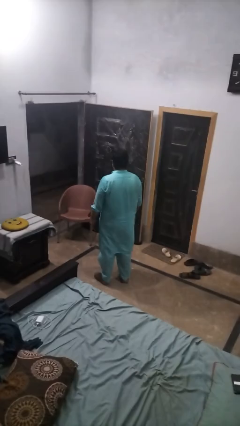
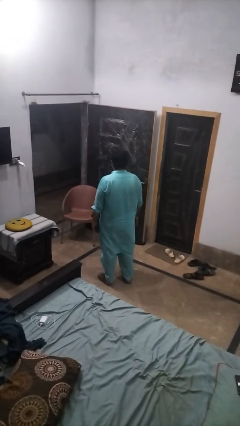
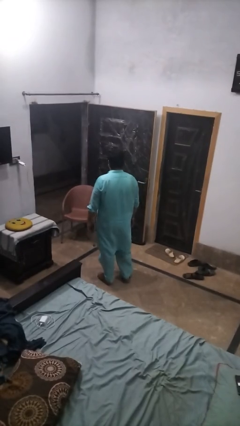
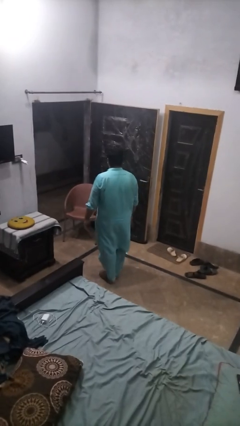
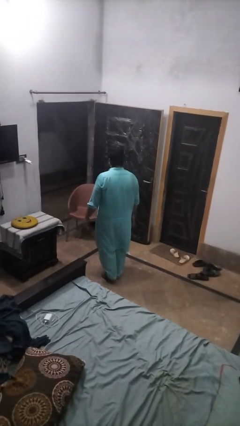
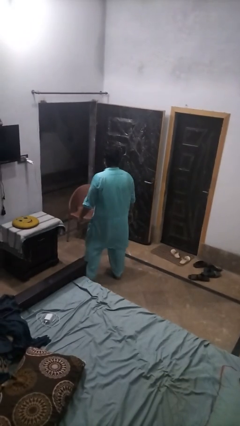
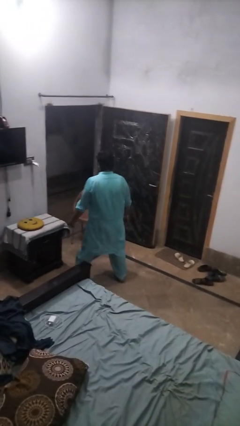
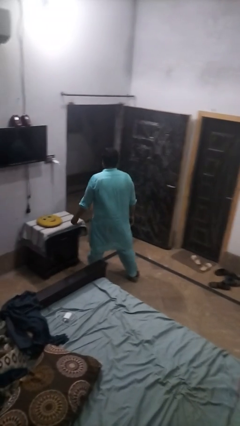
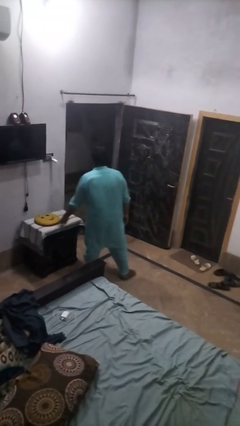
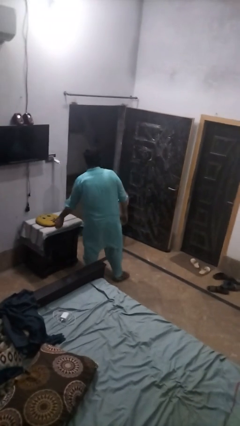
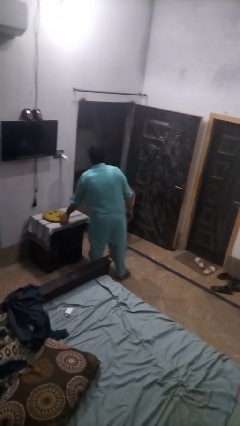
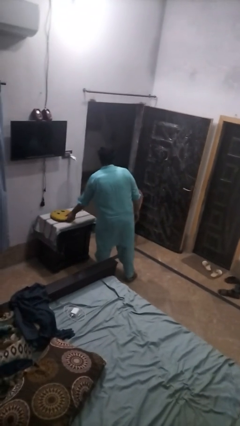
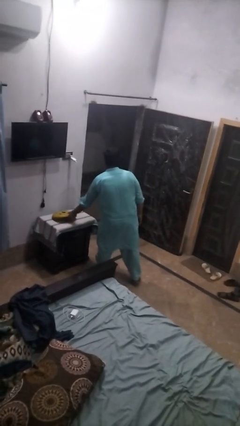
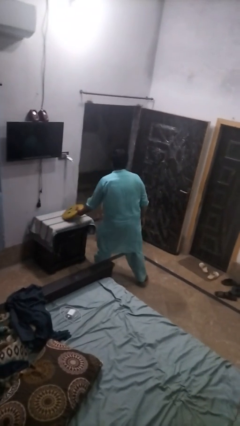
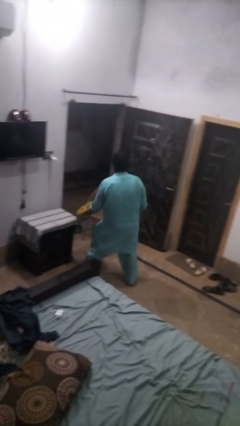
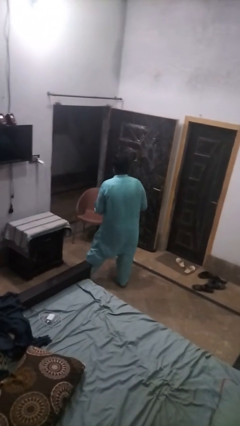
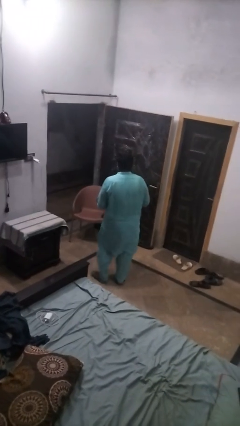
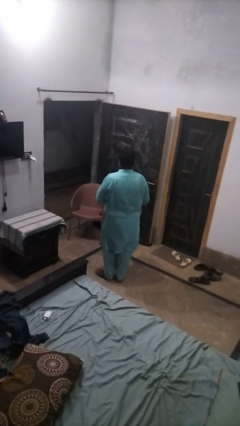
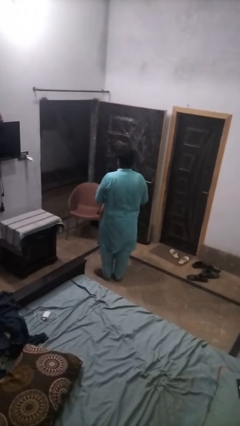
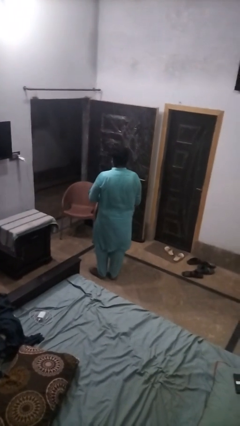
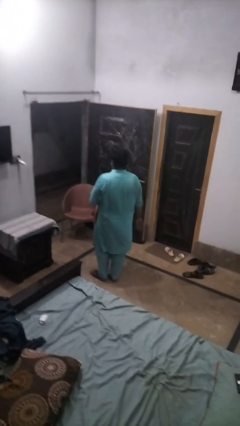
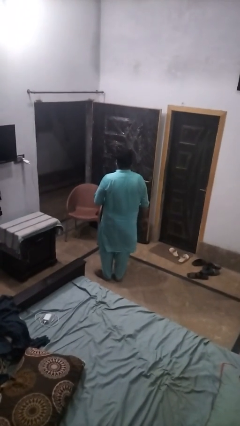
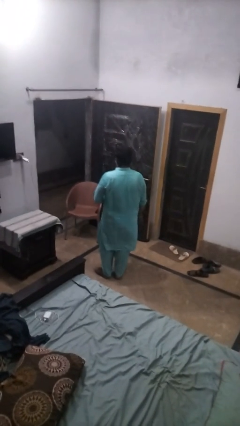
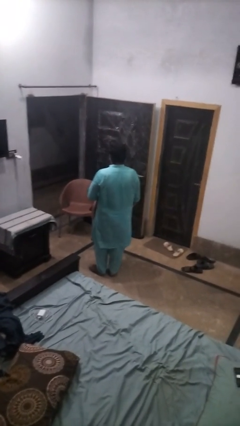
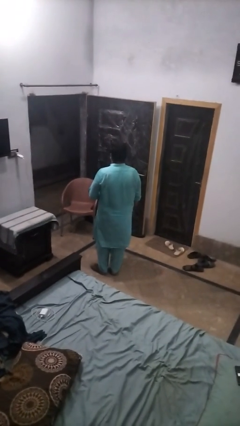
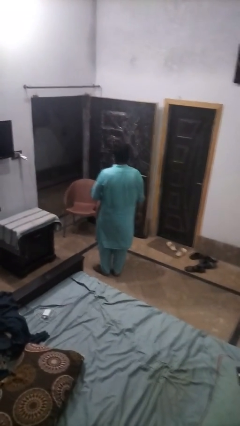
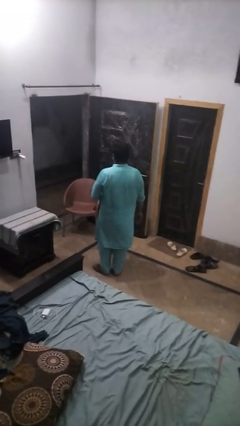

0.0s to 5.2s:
person picks up object from table

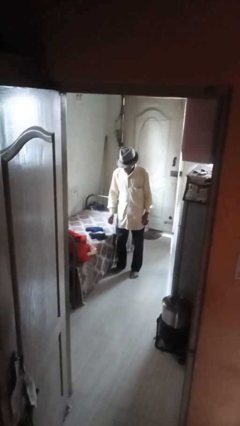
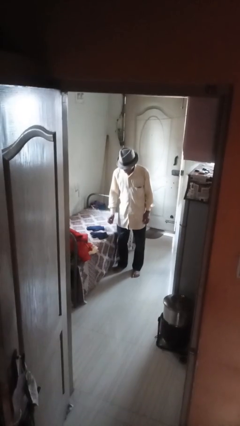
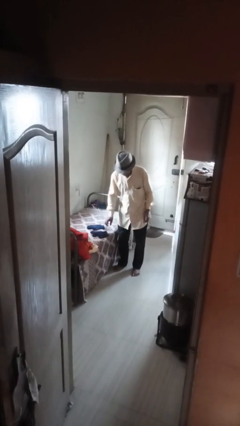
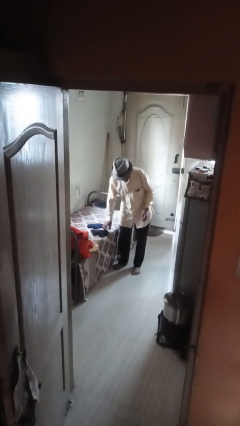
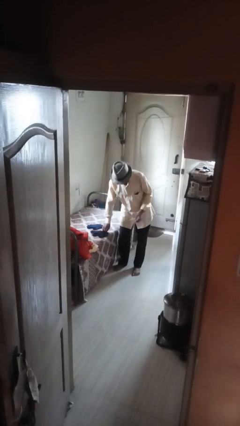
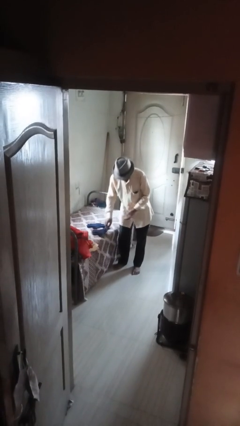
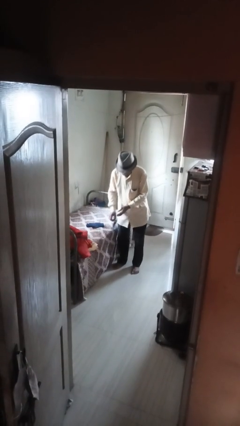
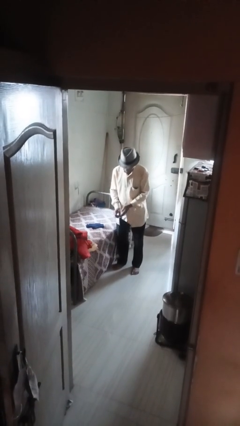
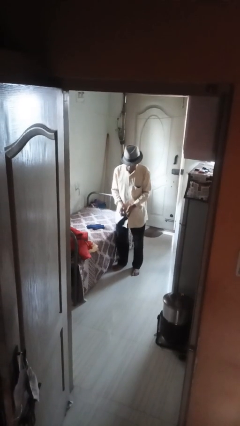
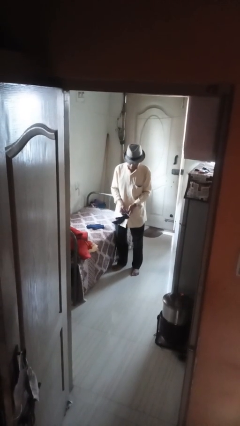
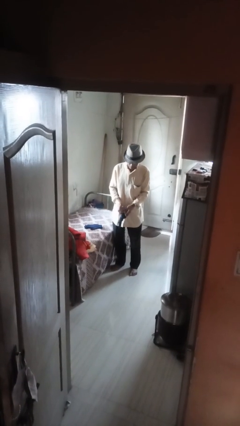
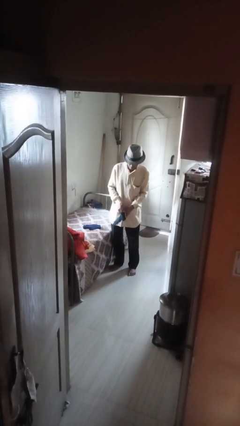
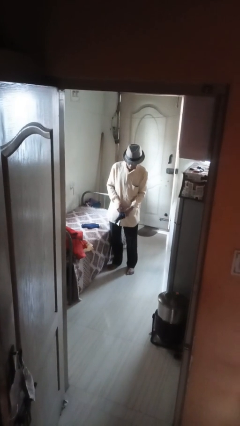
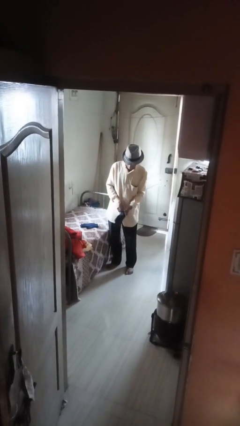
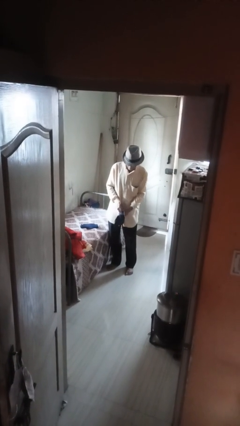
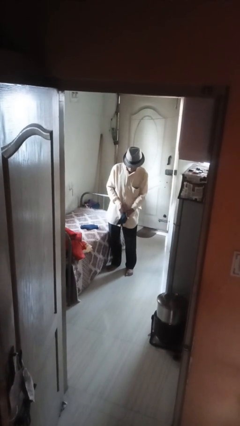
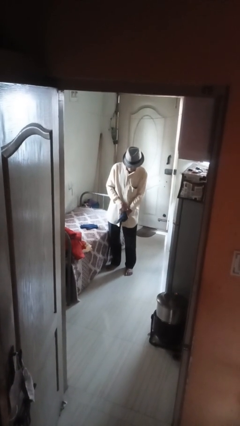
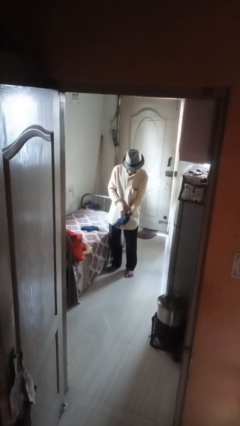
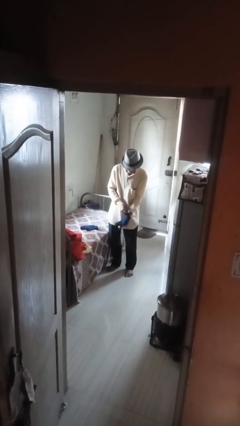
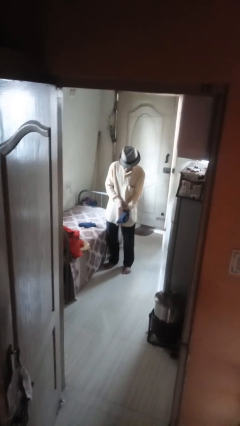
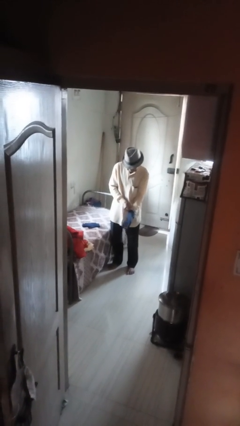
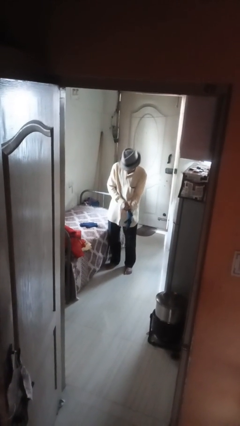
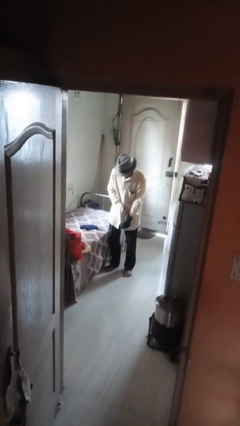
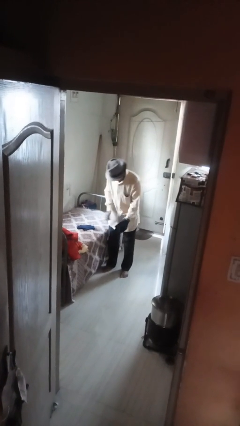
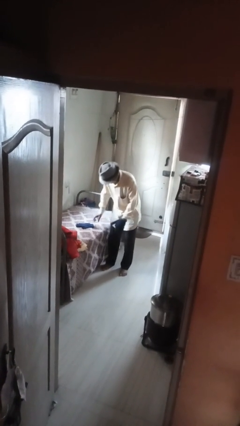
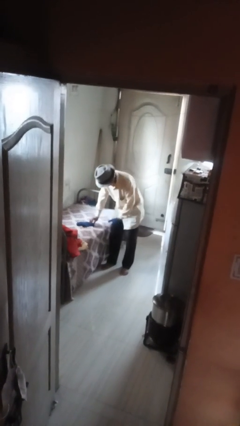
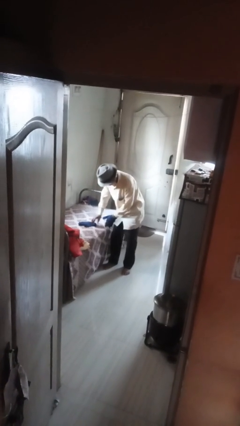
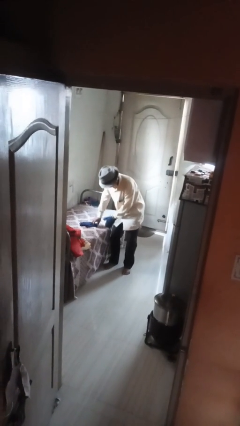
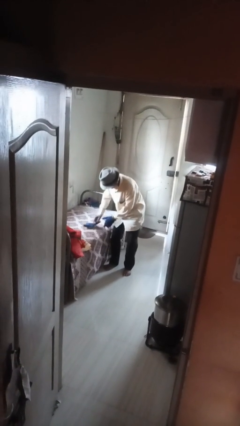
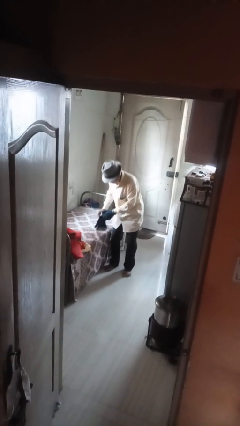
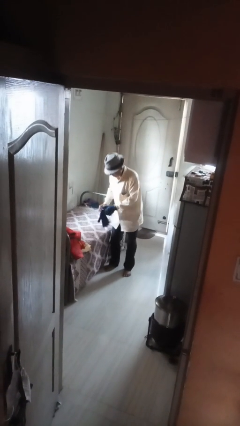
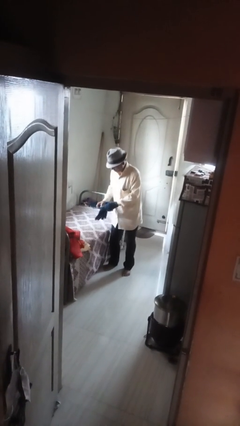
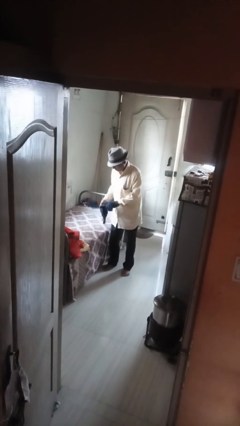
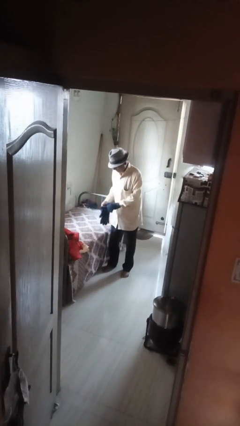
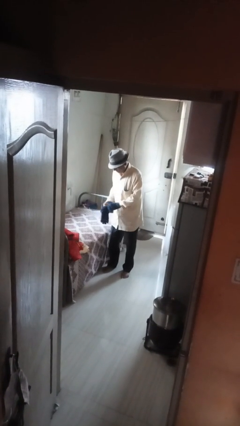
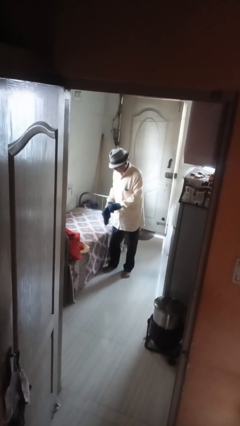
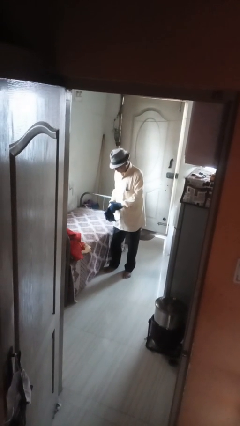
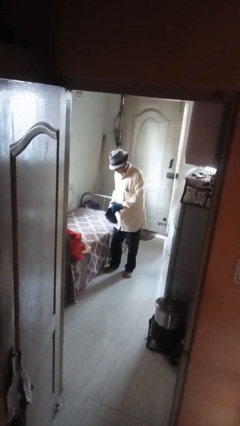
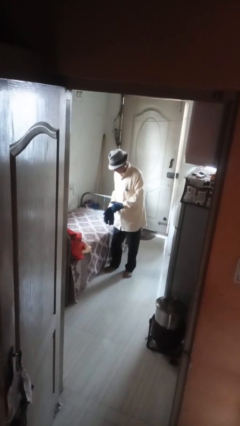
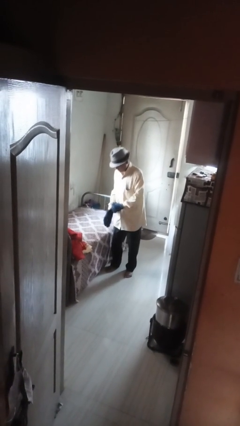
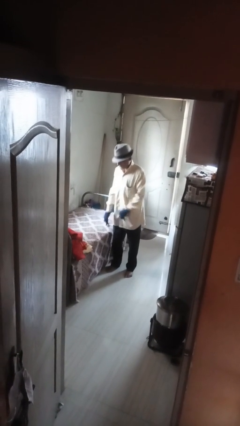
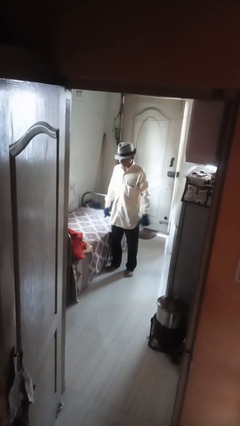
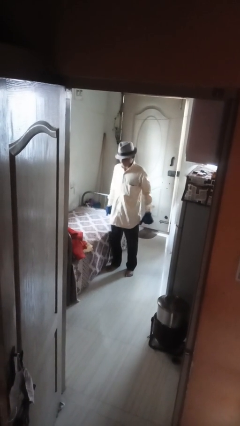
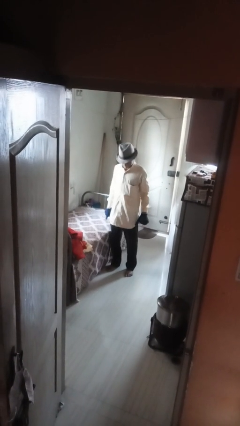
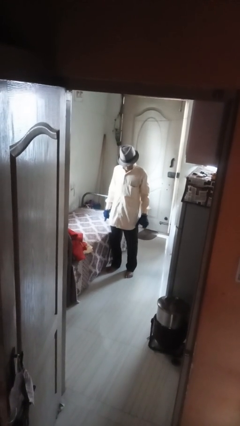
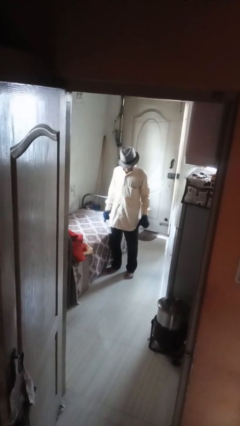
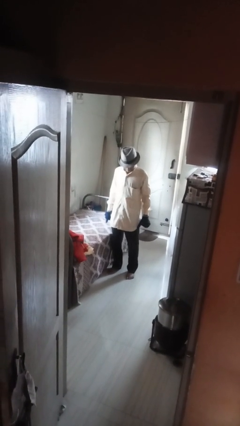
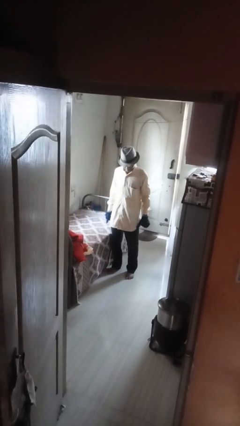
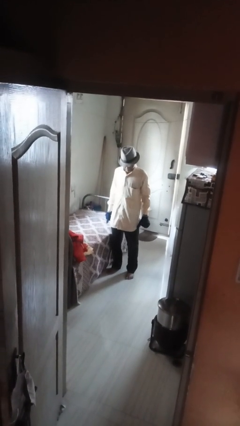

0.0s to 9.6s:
person puts on gloves

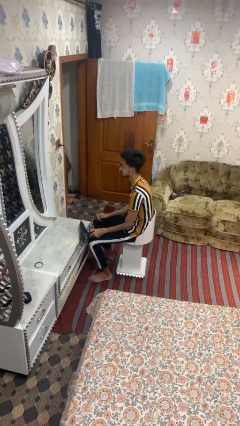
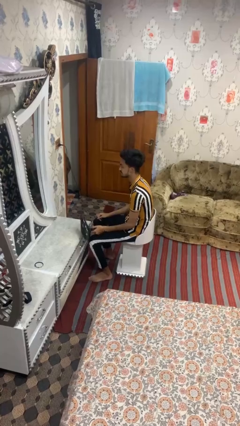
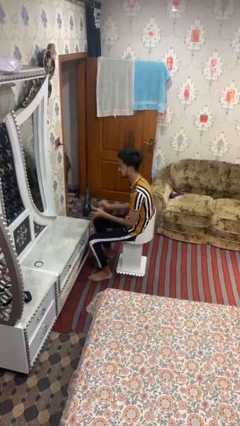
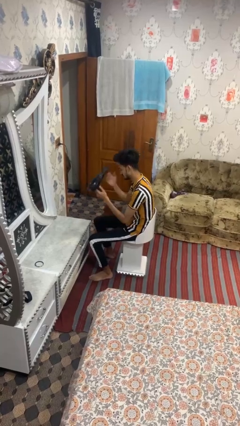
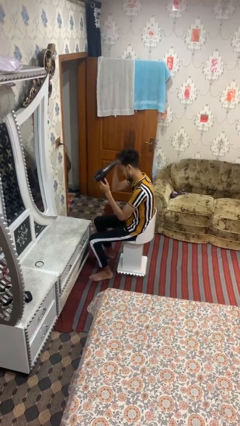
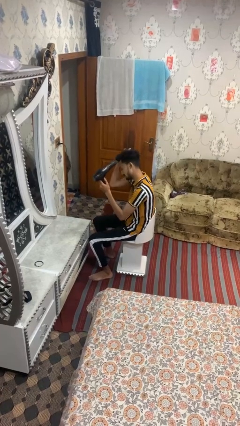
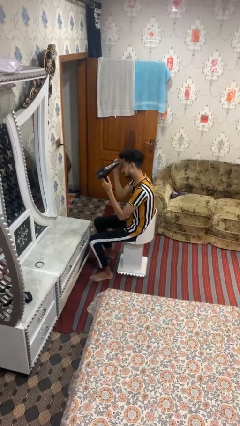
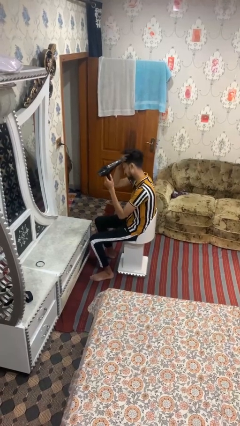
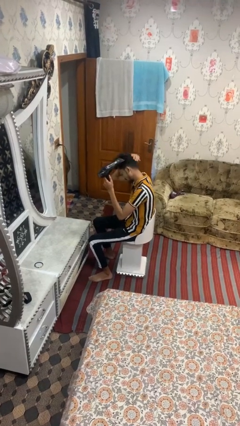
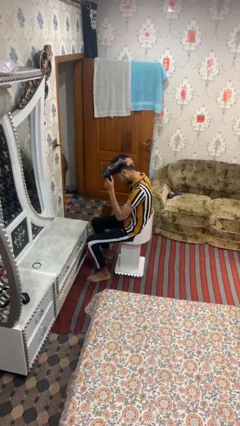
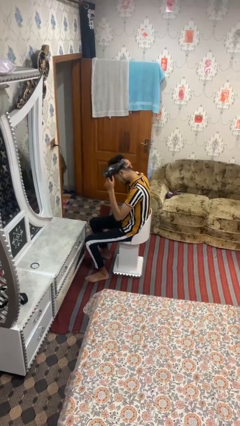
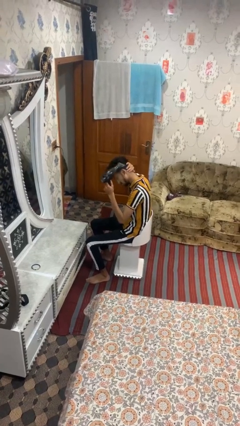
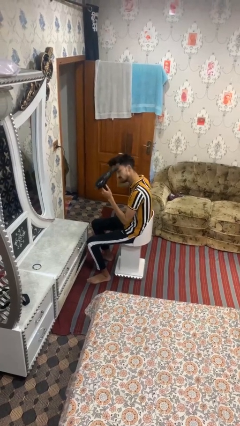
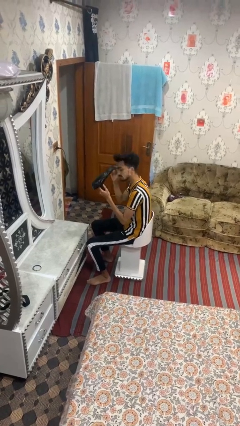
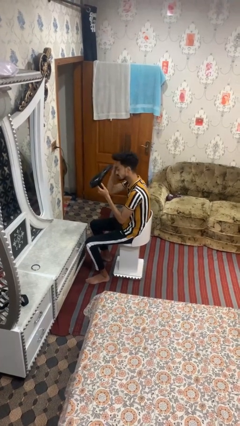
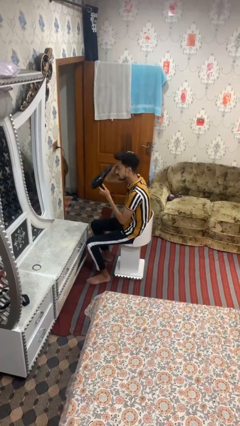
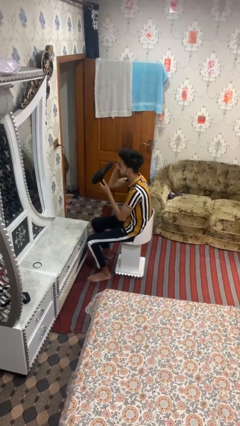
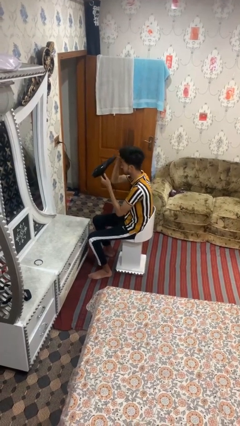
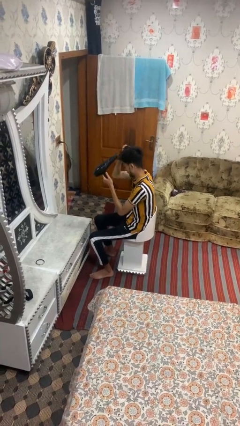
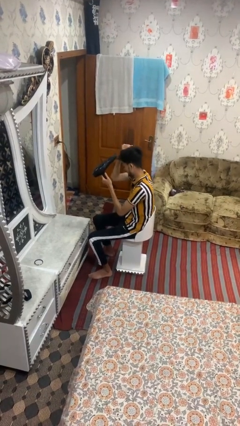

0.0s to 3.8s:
person dries hair with hairdryer
